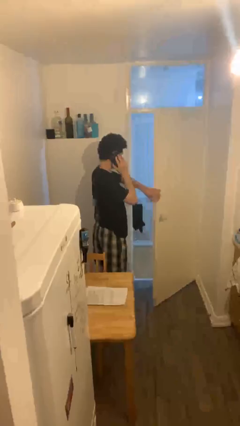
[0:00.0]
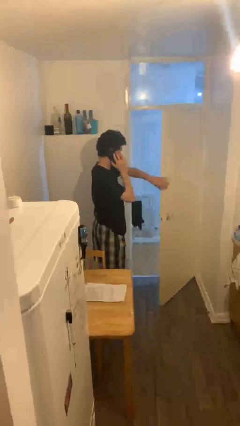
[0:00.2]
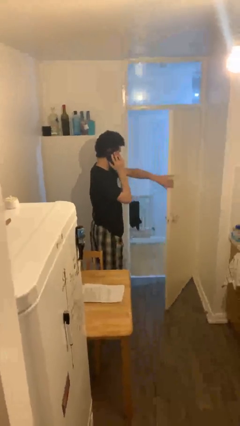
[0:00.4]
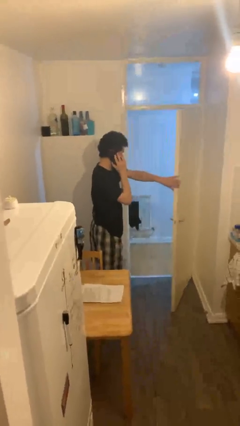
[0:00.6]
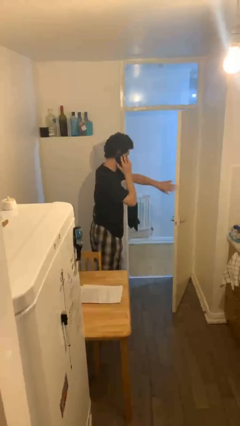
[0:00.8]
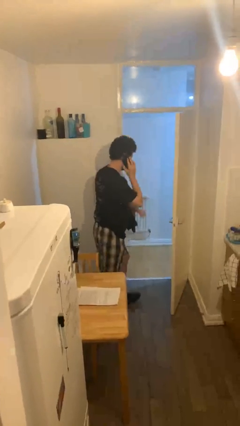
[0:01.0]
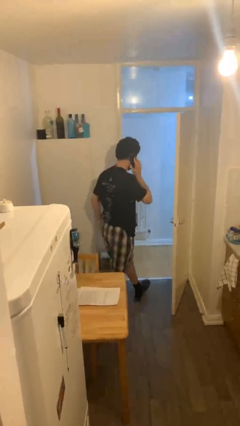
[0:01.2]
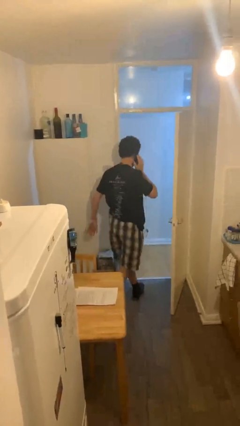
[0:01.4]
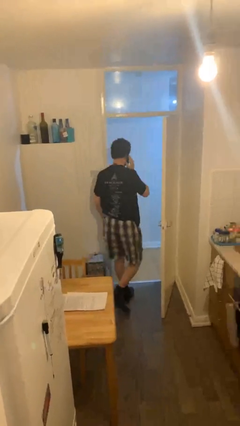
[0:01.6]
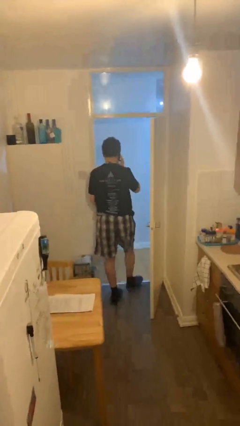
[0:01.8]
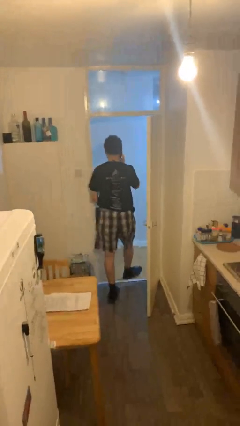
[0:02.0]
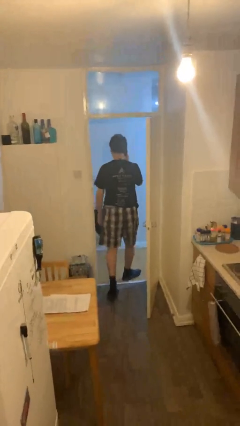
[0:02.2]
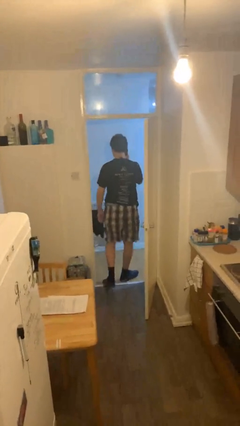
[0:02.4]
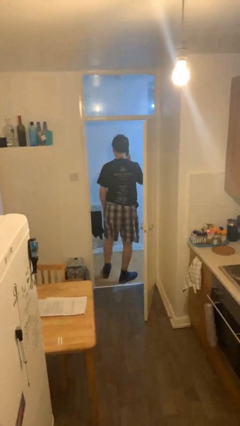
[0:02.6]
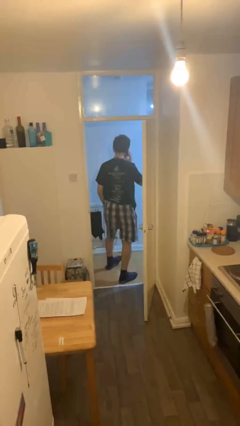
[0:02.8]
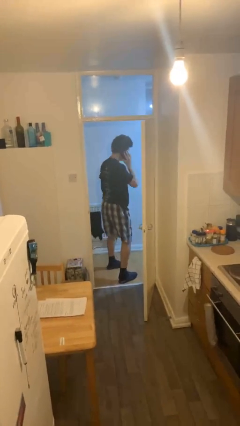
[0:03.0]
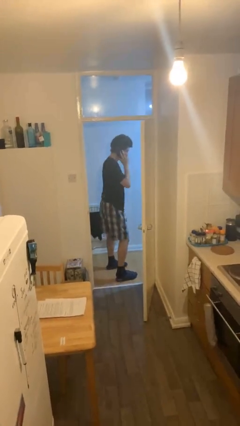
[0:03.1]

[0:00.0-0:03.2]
person exits scene through structure

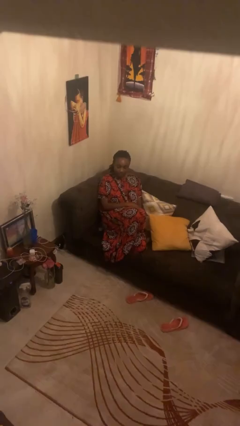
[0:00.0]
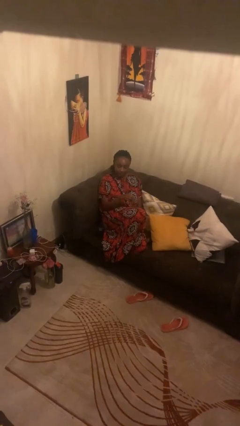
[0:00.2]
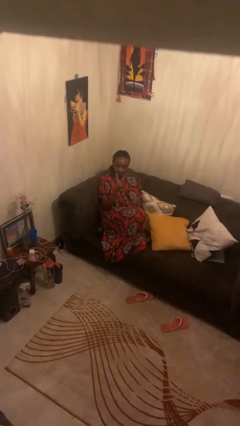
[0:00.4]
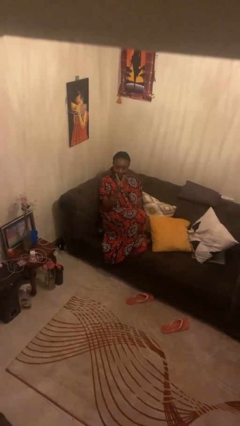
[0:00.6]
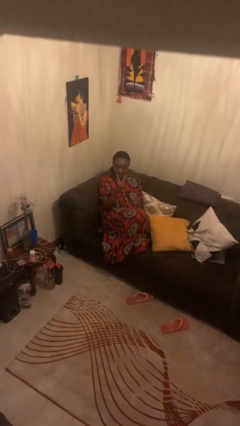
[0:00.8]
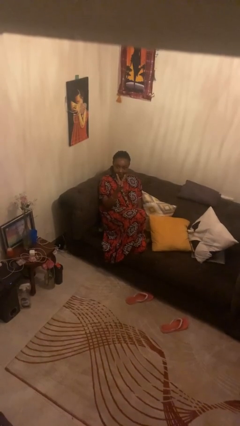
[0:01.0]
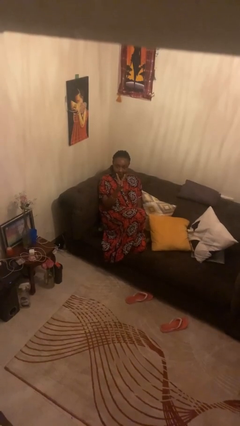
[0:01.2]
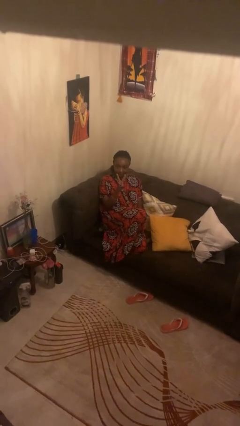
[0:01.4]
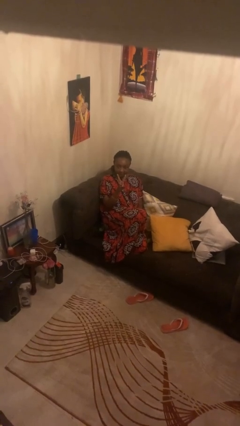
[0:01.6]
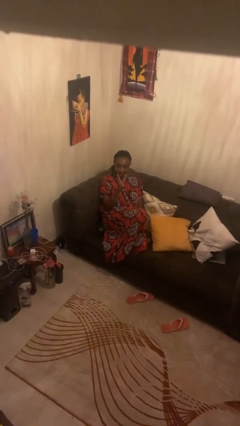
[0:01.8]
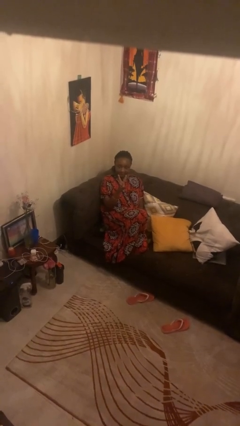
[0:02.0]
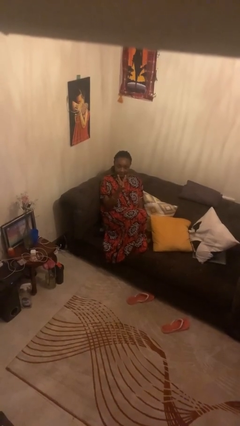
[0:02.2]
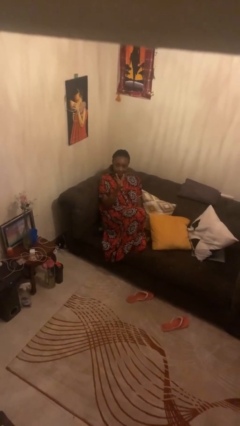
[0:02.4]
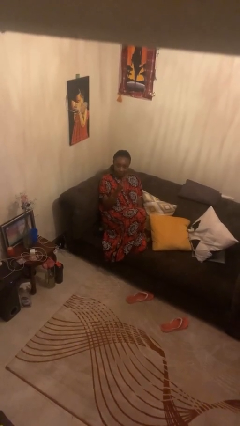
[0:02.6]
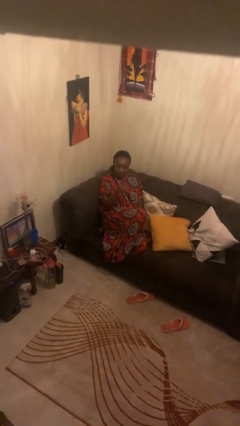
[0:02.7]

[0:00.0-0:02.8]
person gestures peace

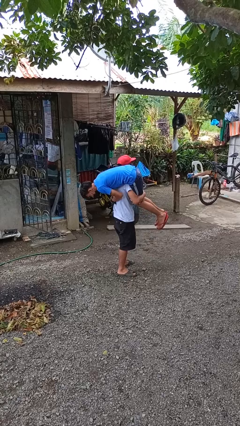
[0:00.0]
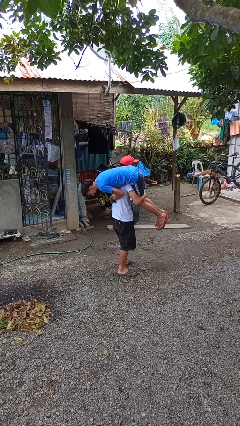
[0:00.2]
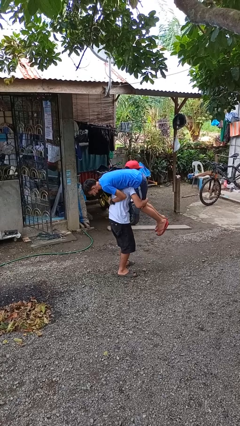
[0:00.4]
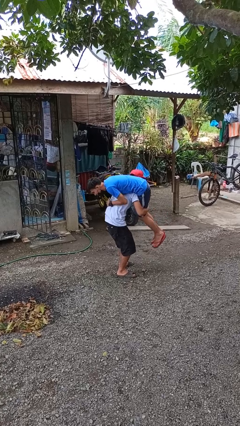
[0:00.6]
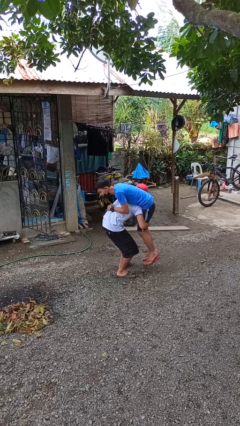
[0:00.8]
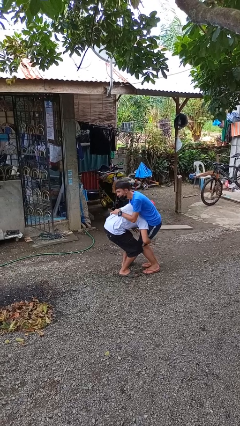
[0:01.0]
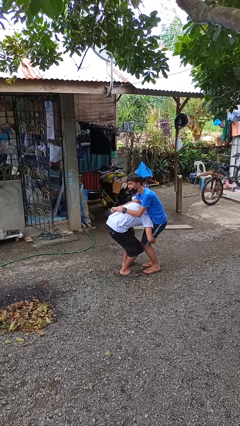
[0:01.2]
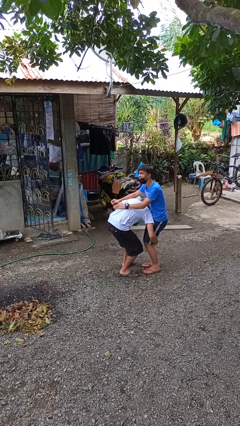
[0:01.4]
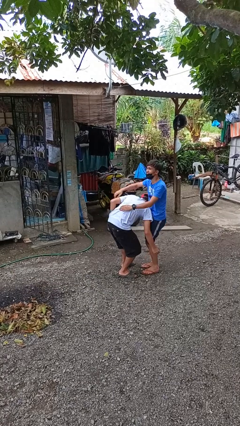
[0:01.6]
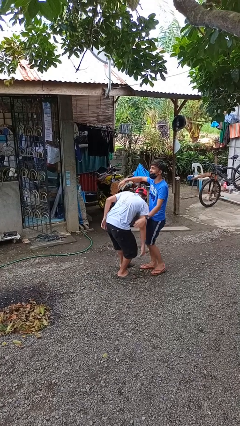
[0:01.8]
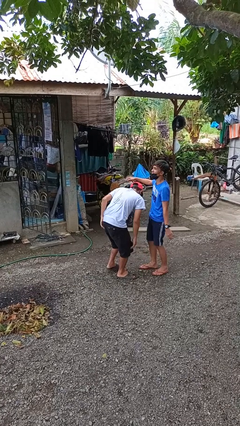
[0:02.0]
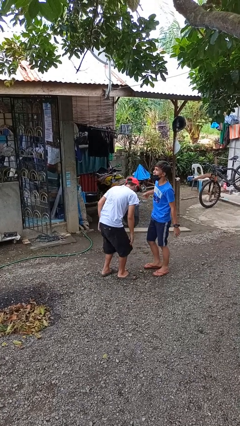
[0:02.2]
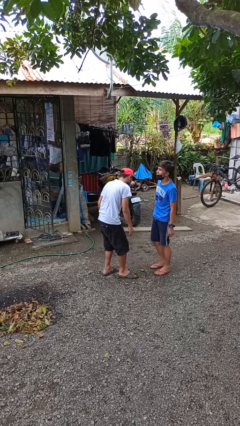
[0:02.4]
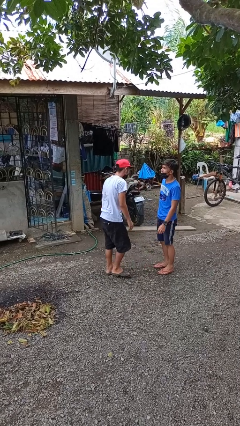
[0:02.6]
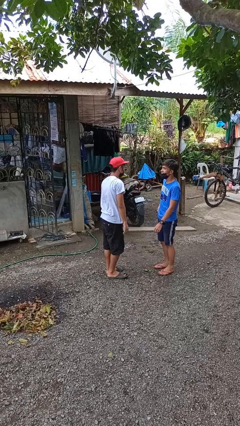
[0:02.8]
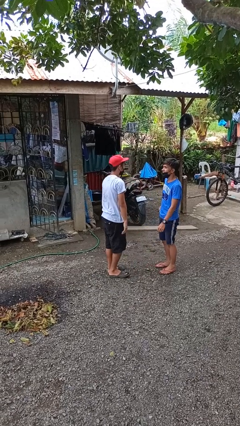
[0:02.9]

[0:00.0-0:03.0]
person puts down person

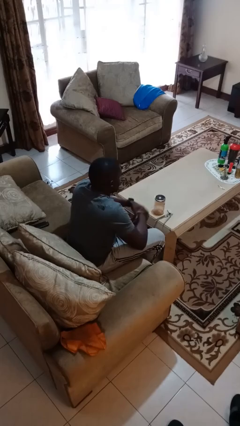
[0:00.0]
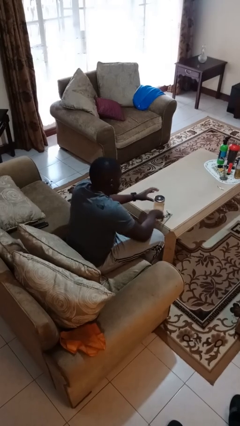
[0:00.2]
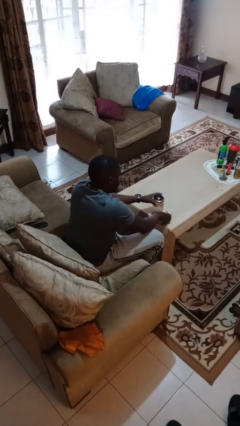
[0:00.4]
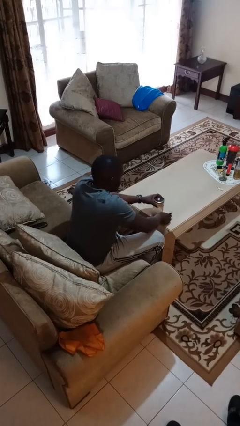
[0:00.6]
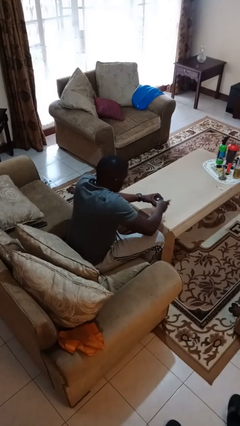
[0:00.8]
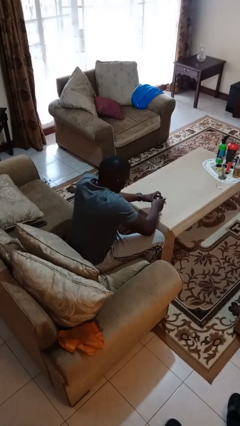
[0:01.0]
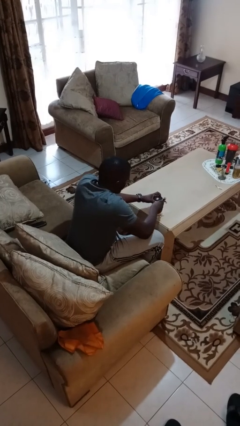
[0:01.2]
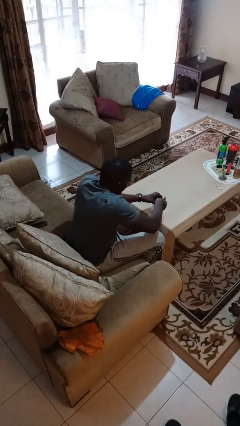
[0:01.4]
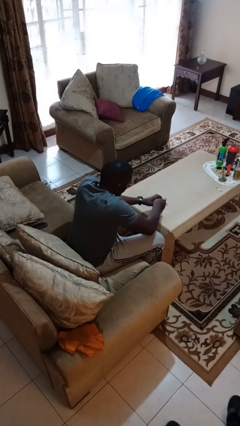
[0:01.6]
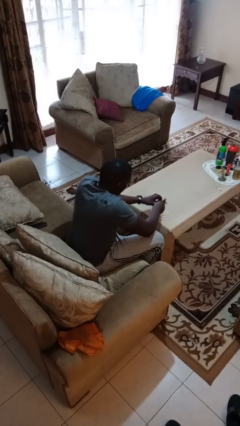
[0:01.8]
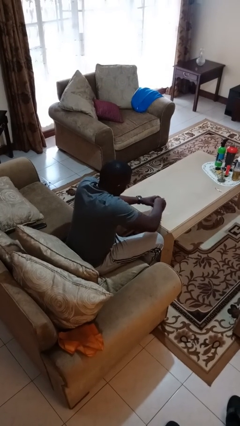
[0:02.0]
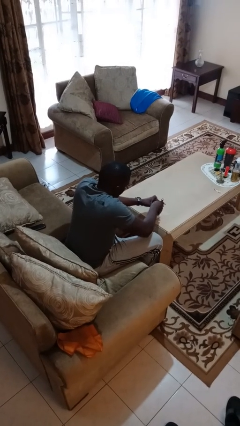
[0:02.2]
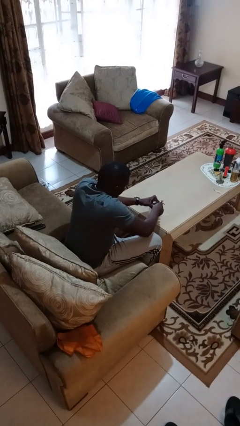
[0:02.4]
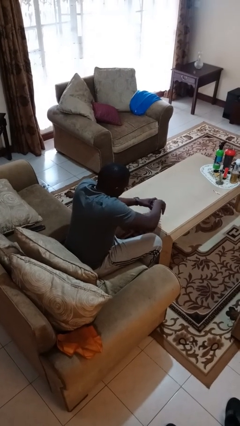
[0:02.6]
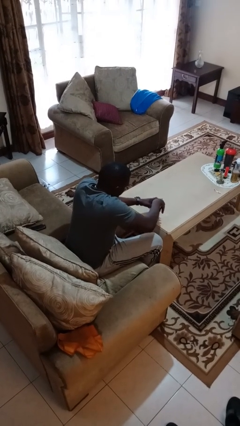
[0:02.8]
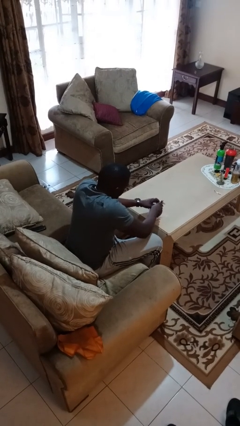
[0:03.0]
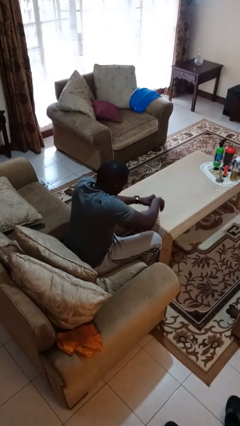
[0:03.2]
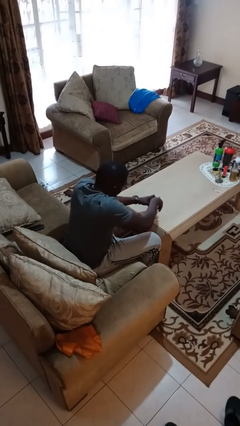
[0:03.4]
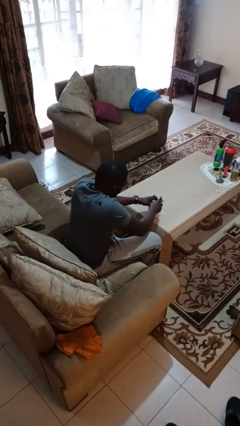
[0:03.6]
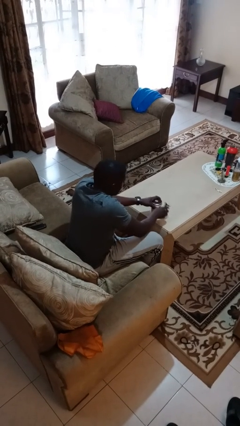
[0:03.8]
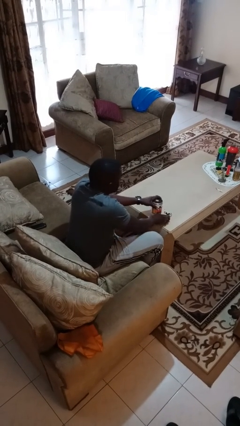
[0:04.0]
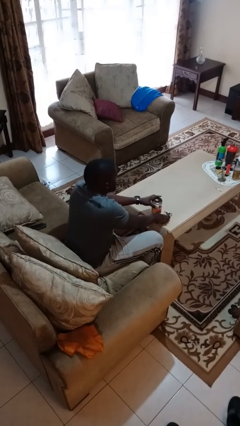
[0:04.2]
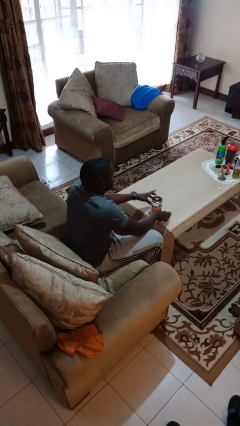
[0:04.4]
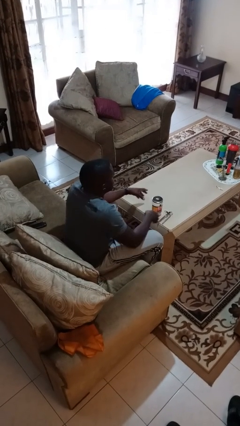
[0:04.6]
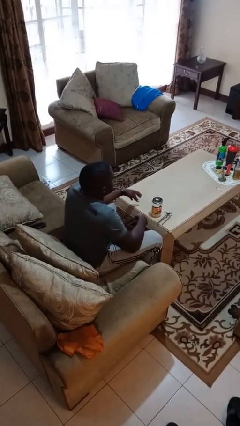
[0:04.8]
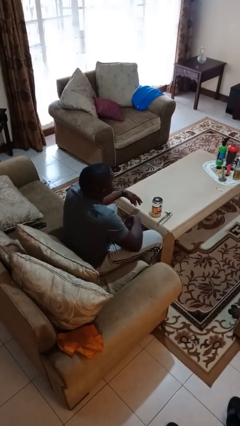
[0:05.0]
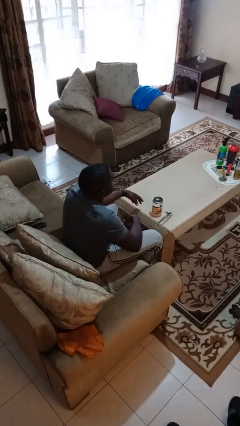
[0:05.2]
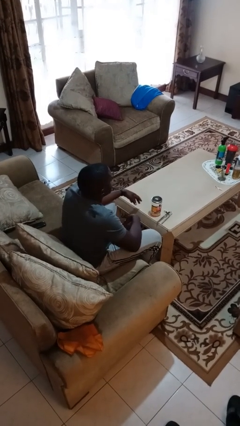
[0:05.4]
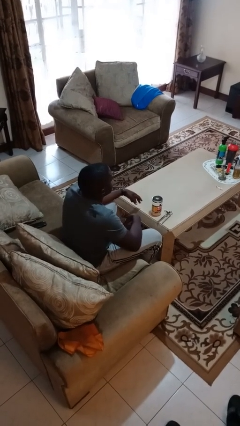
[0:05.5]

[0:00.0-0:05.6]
person opens can with can opener

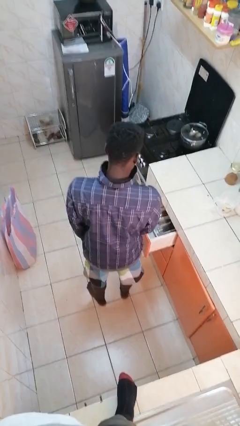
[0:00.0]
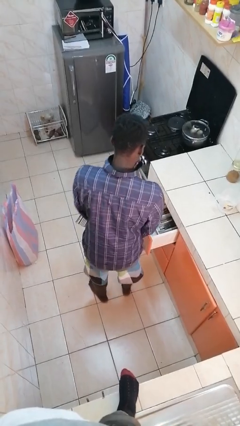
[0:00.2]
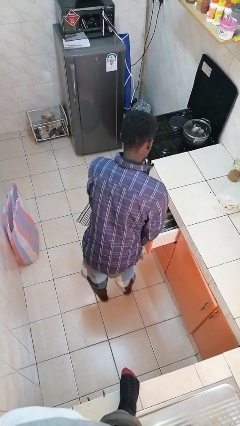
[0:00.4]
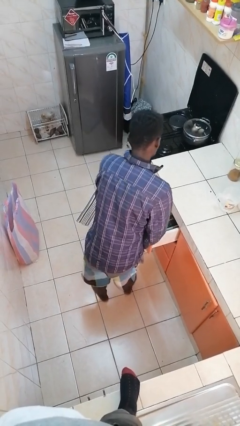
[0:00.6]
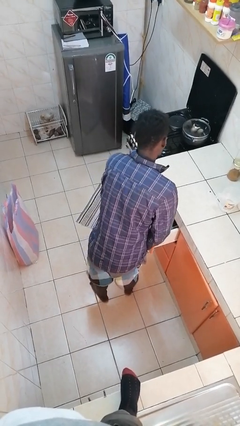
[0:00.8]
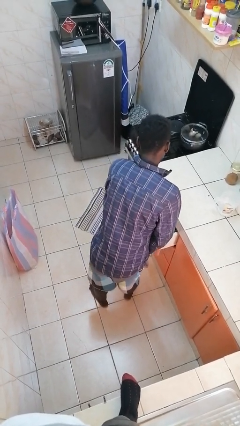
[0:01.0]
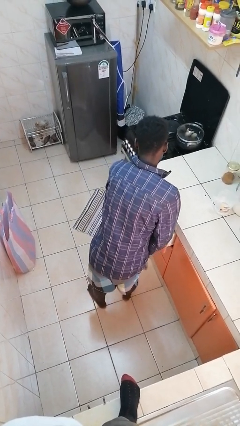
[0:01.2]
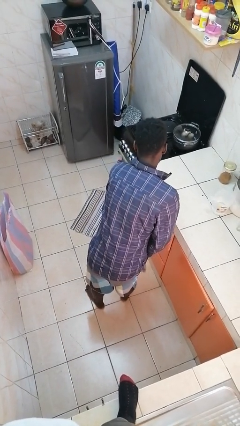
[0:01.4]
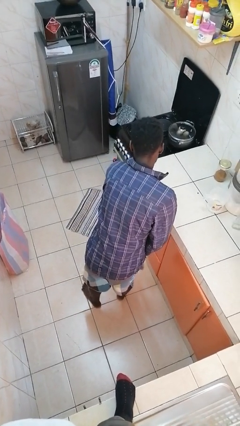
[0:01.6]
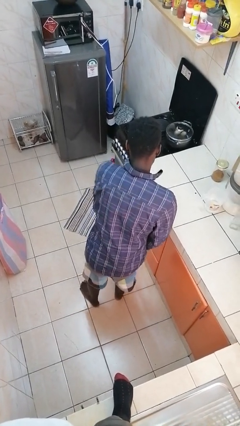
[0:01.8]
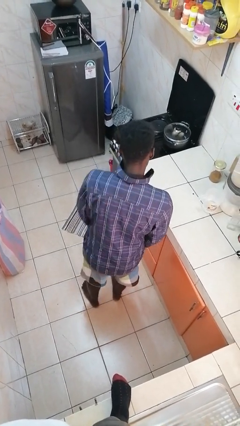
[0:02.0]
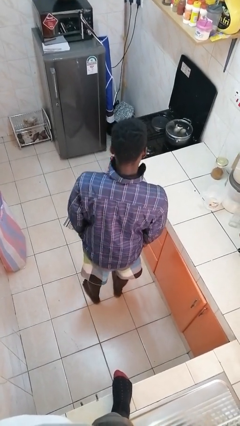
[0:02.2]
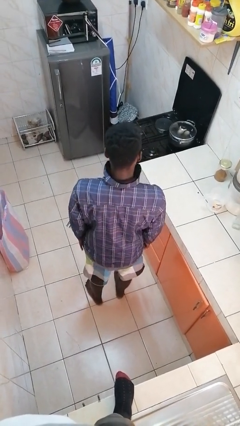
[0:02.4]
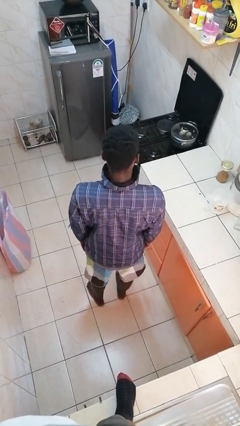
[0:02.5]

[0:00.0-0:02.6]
person closes kitchen drawer

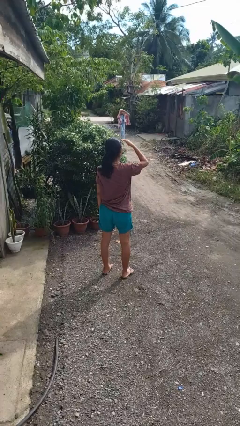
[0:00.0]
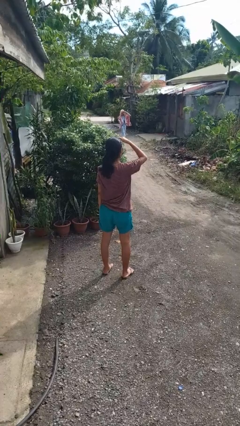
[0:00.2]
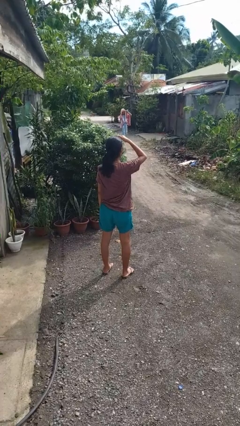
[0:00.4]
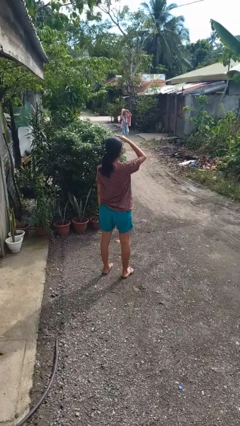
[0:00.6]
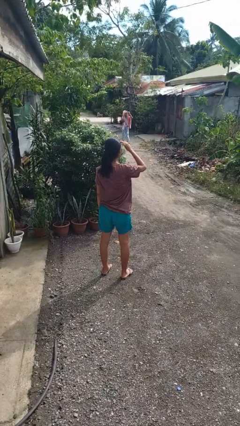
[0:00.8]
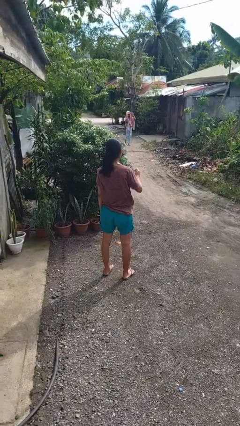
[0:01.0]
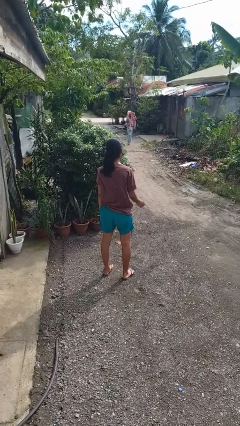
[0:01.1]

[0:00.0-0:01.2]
person shades eyes
